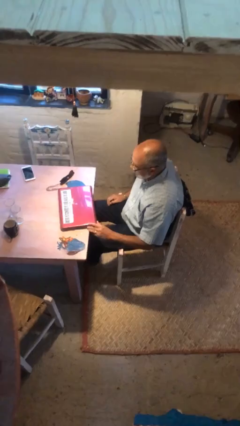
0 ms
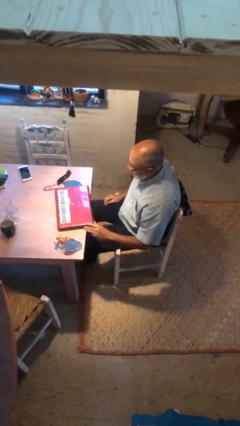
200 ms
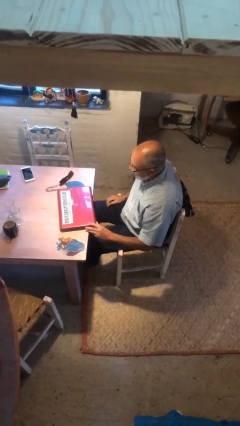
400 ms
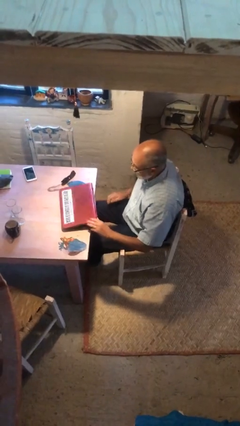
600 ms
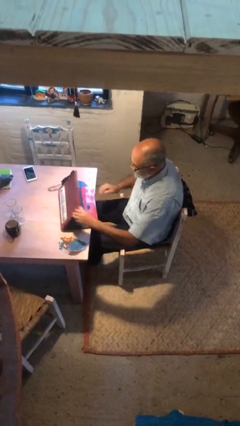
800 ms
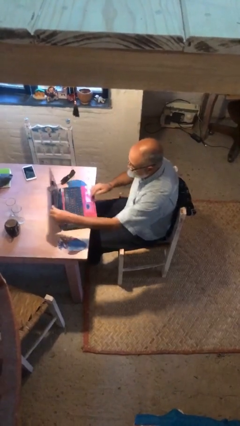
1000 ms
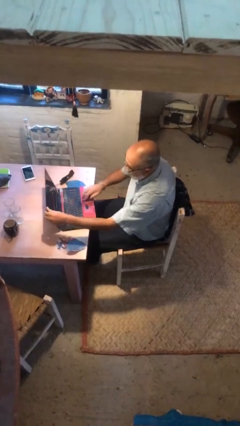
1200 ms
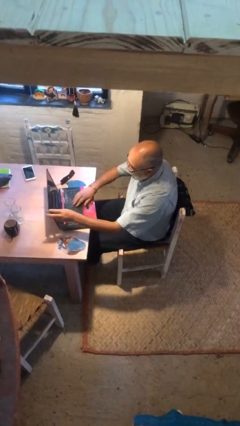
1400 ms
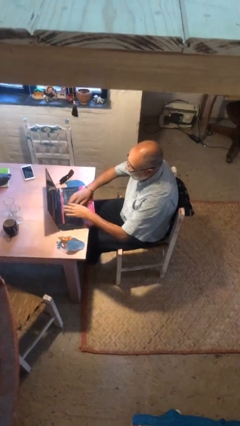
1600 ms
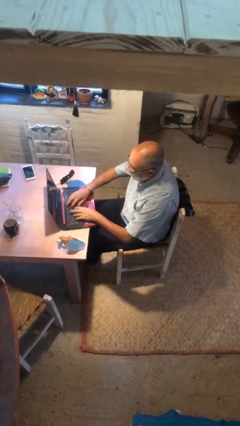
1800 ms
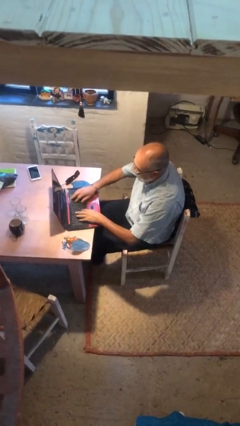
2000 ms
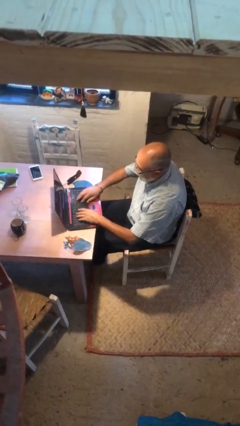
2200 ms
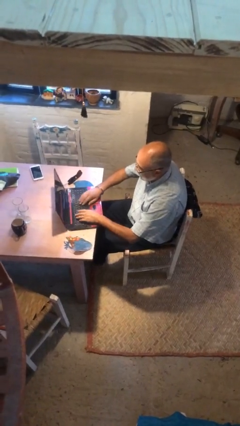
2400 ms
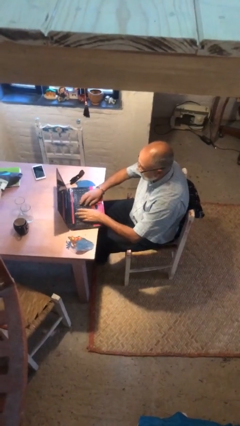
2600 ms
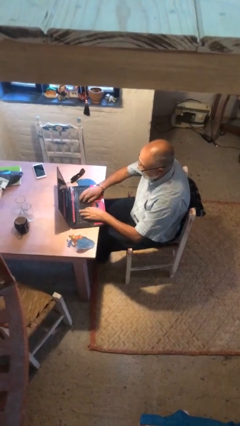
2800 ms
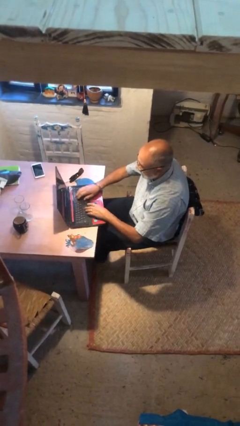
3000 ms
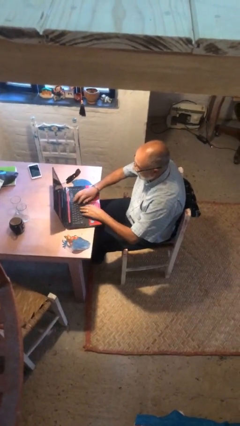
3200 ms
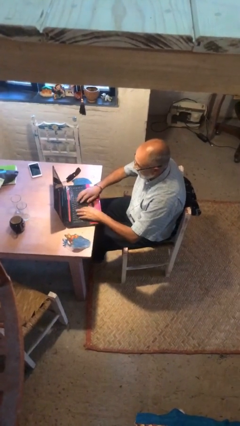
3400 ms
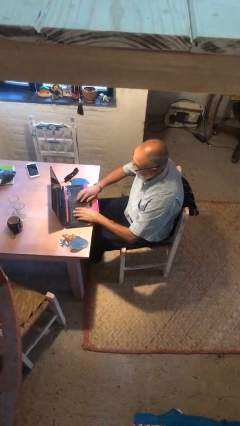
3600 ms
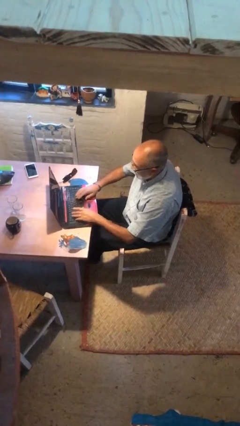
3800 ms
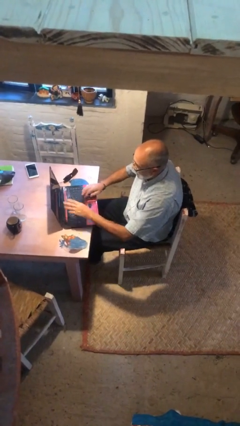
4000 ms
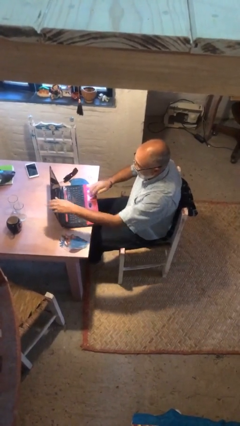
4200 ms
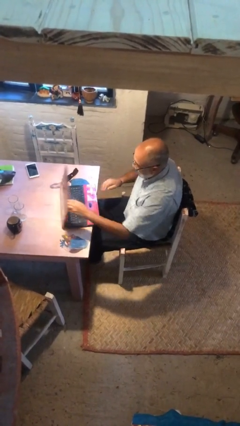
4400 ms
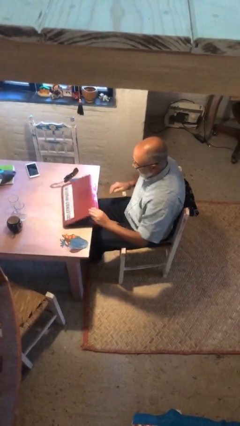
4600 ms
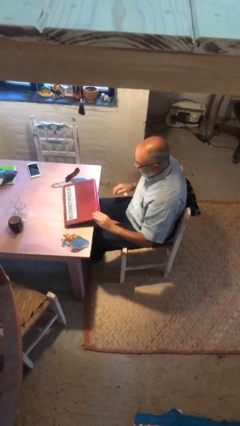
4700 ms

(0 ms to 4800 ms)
person interacts with laptop

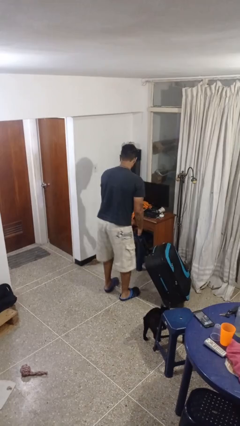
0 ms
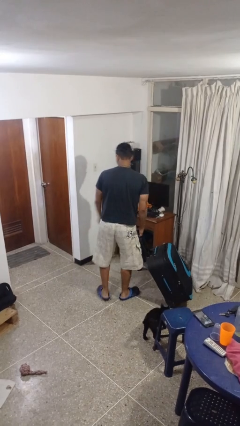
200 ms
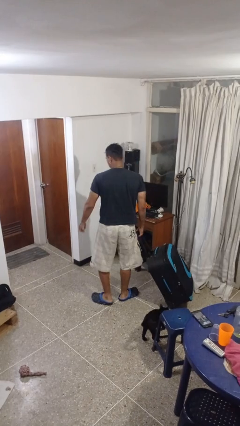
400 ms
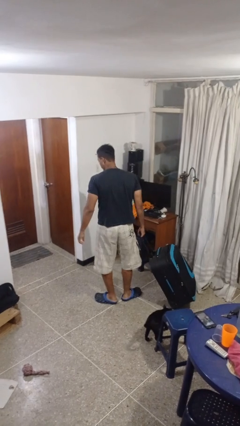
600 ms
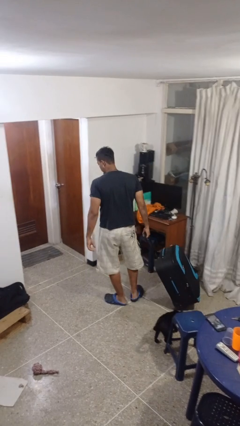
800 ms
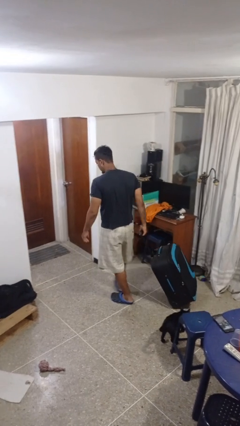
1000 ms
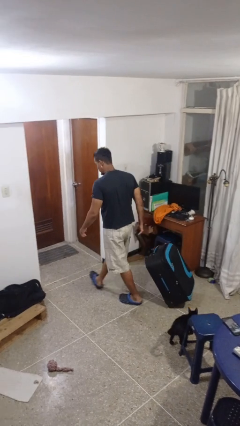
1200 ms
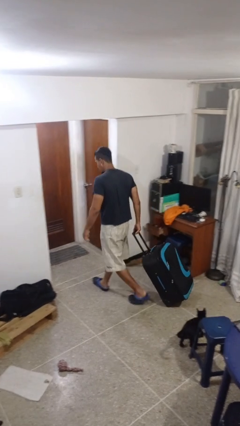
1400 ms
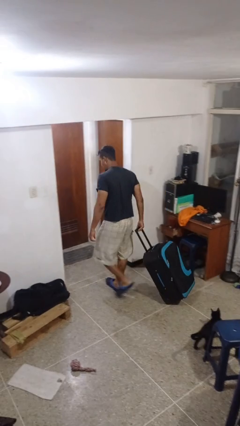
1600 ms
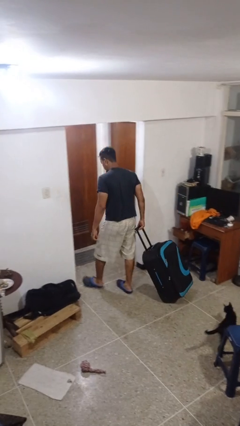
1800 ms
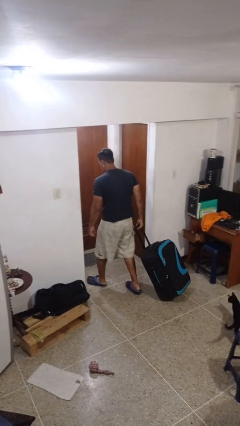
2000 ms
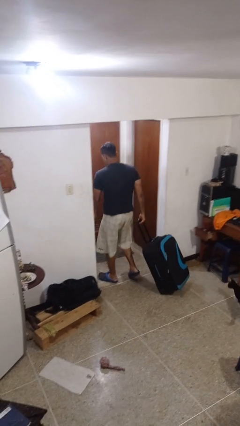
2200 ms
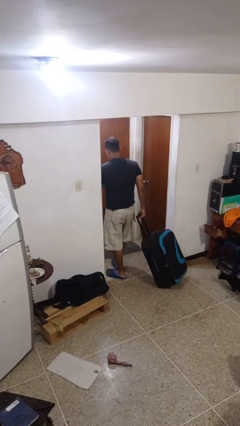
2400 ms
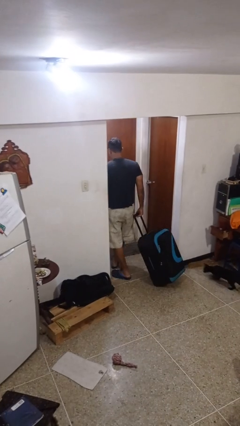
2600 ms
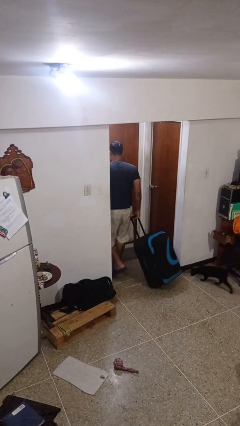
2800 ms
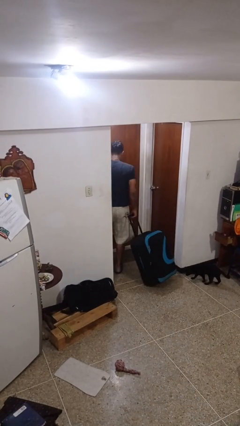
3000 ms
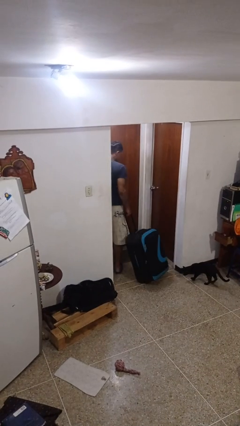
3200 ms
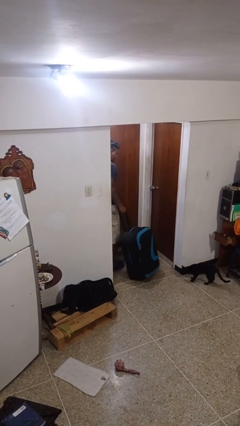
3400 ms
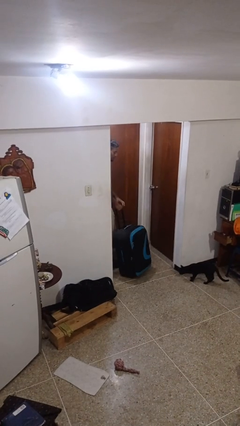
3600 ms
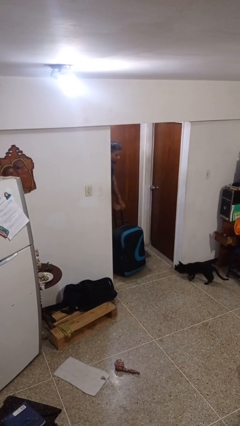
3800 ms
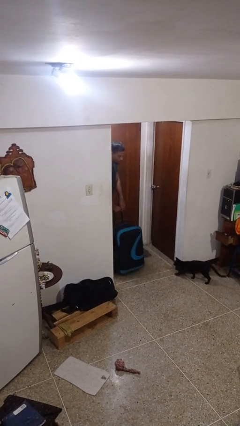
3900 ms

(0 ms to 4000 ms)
person pulls wheeled cart

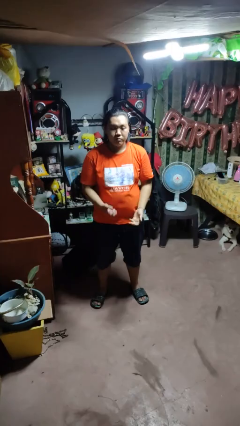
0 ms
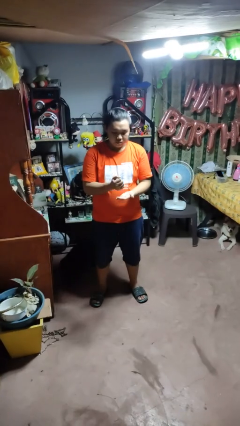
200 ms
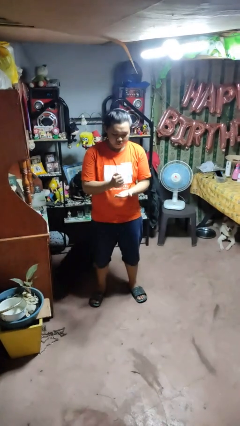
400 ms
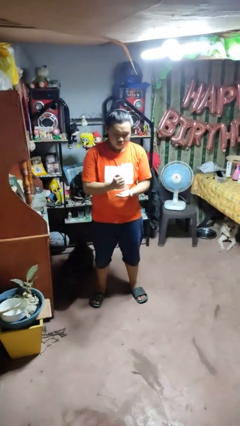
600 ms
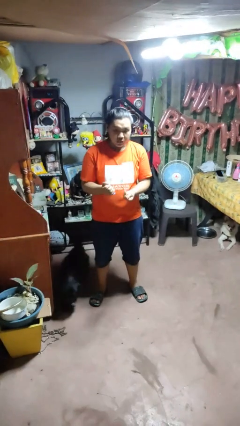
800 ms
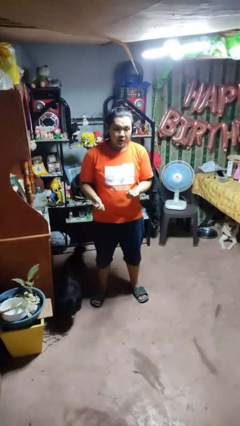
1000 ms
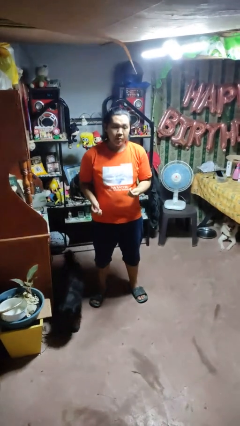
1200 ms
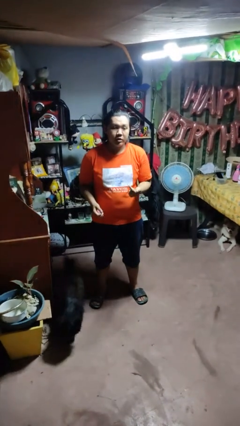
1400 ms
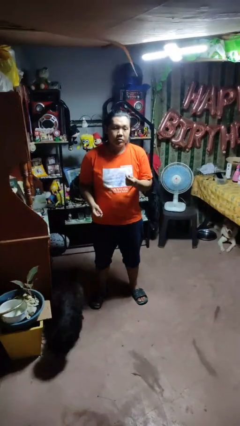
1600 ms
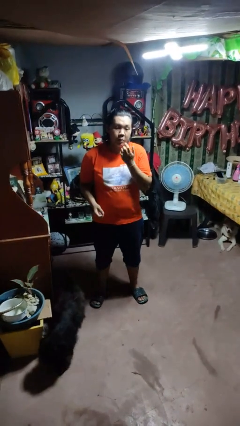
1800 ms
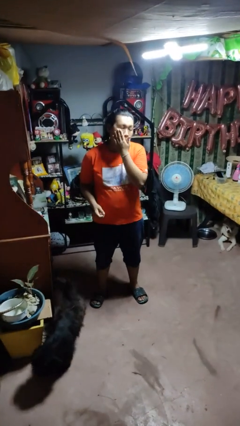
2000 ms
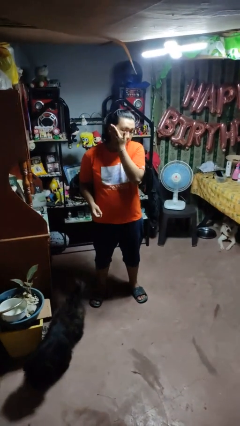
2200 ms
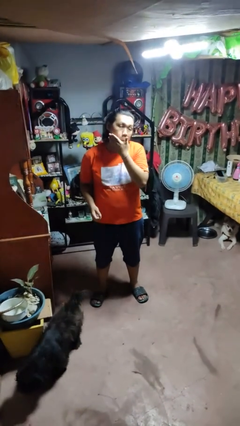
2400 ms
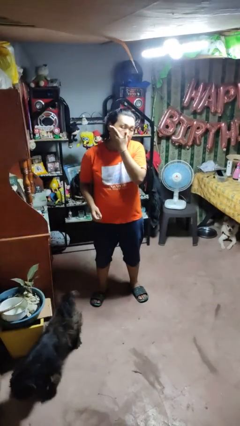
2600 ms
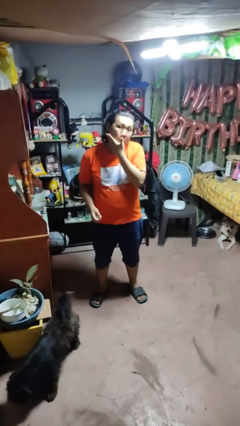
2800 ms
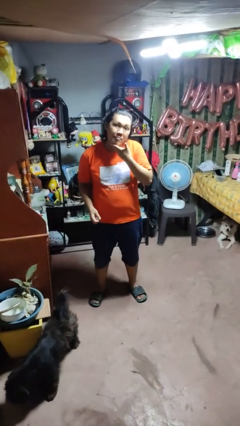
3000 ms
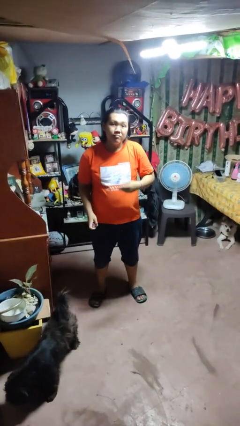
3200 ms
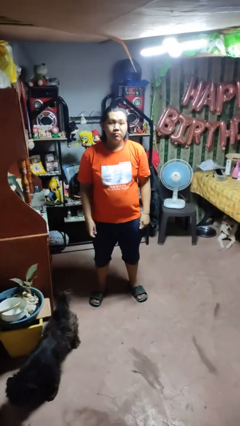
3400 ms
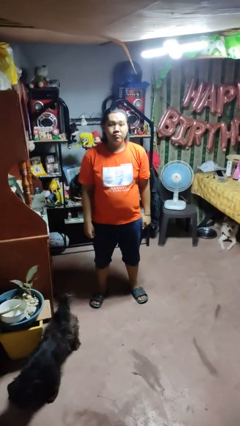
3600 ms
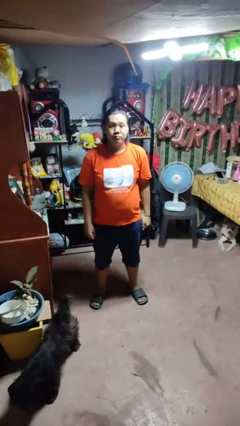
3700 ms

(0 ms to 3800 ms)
person applies facial moisturizer

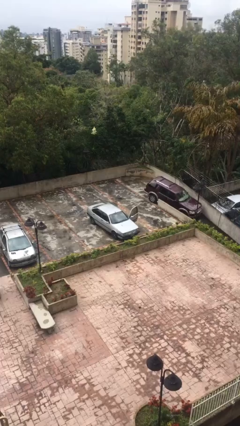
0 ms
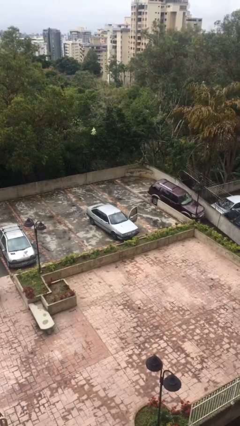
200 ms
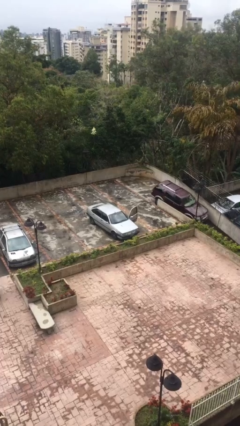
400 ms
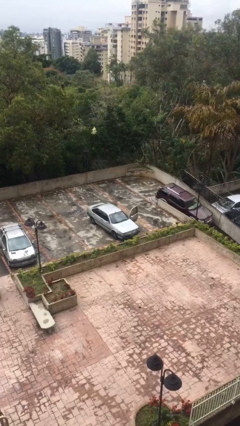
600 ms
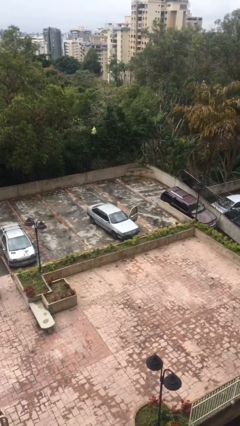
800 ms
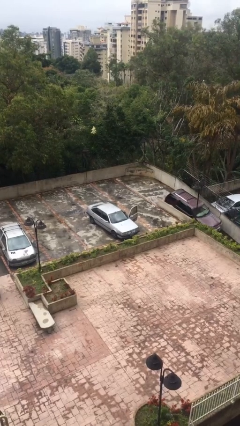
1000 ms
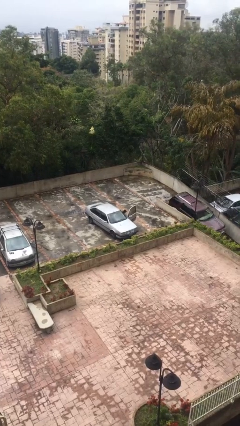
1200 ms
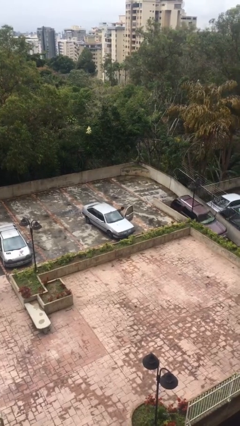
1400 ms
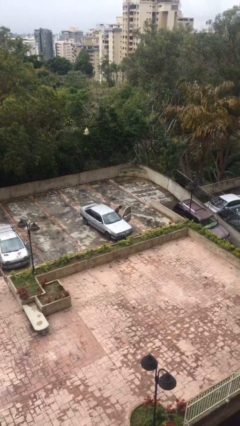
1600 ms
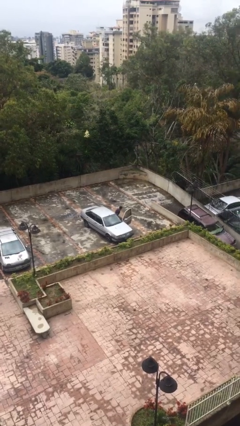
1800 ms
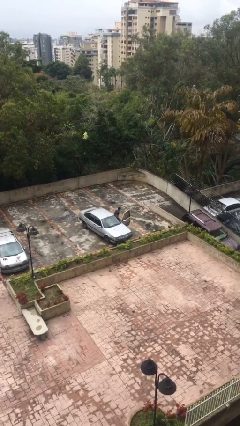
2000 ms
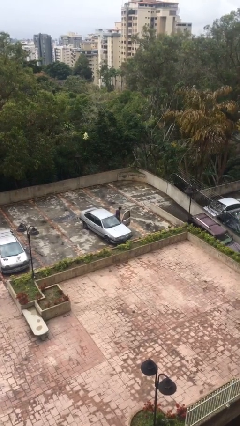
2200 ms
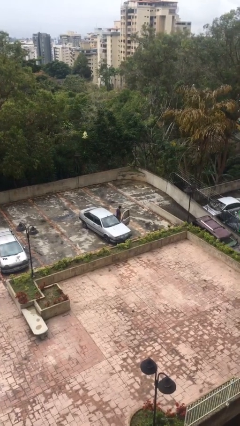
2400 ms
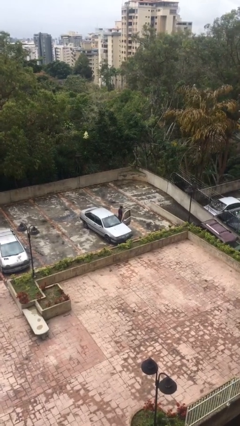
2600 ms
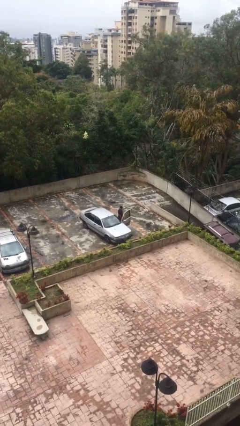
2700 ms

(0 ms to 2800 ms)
person exits car

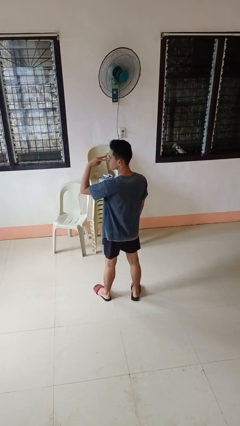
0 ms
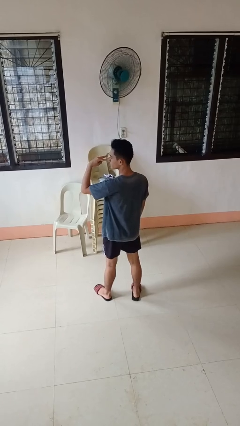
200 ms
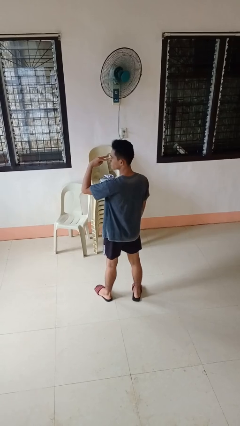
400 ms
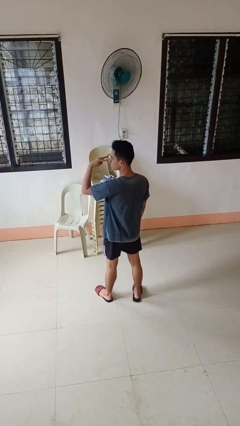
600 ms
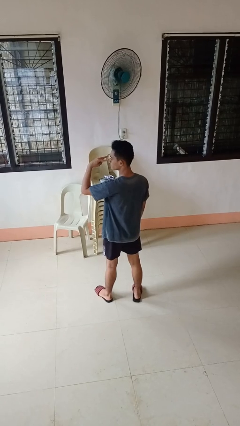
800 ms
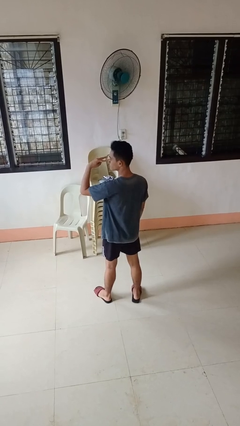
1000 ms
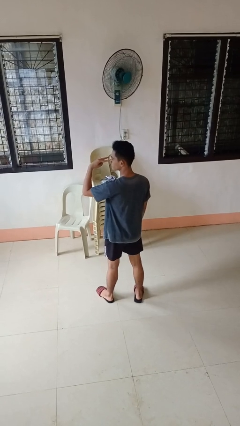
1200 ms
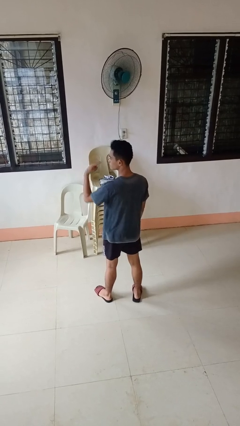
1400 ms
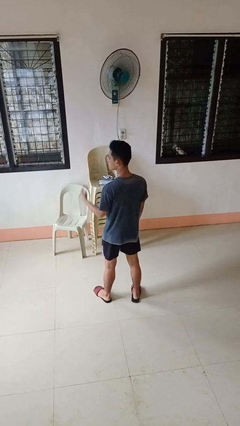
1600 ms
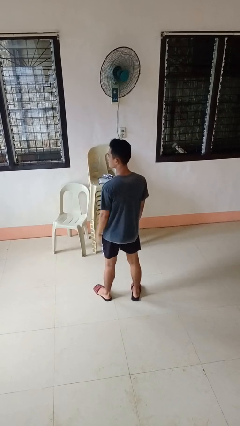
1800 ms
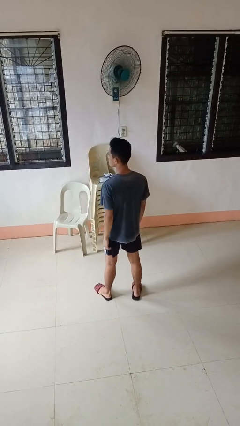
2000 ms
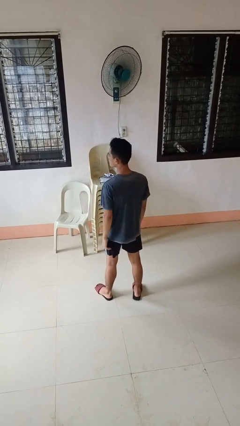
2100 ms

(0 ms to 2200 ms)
person gestures watch closely
